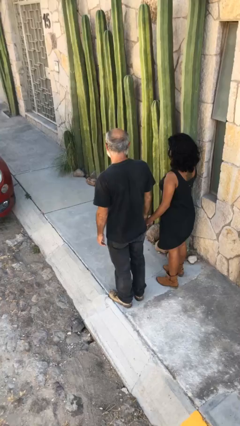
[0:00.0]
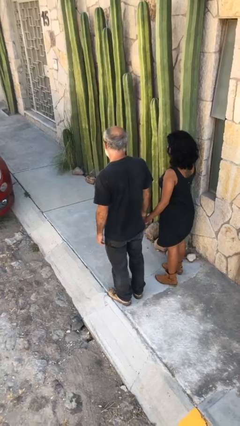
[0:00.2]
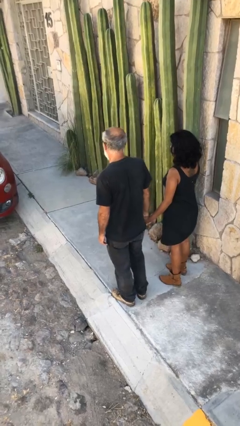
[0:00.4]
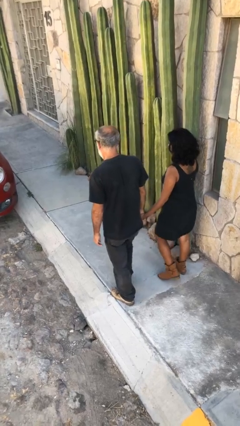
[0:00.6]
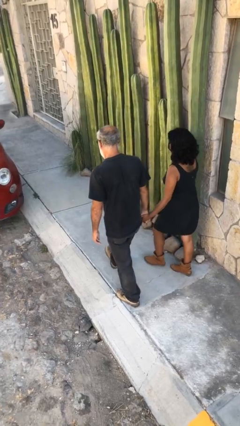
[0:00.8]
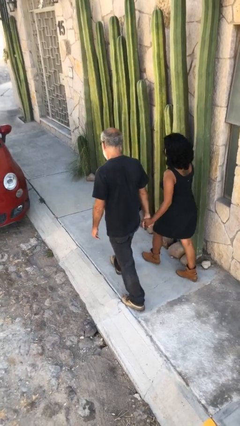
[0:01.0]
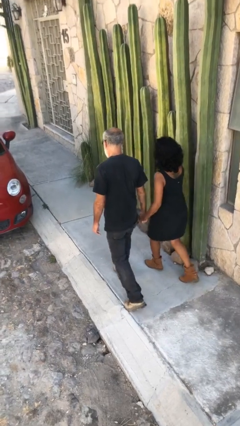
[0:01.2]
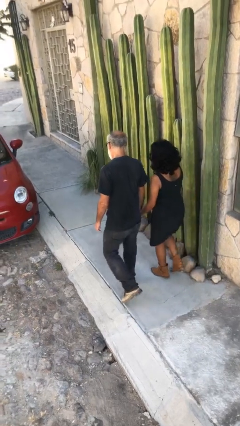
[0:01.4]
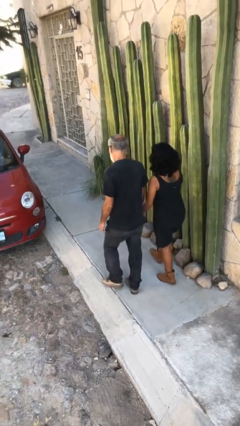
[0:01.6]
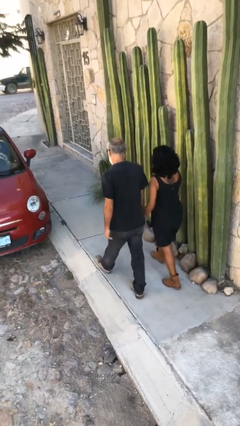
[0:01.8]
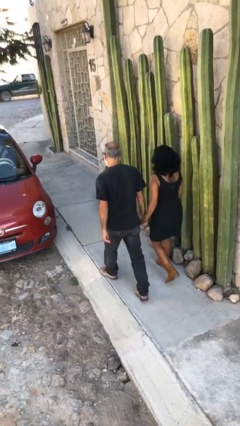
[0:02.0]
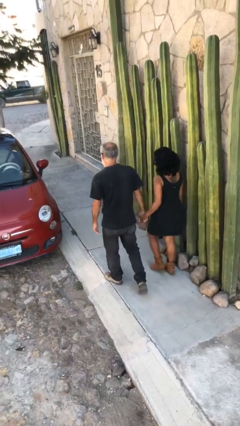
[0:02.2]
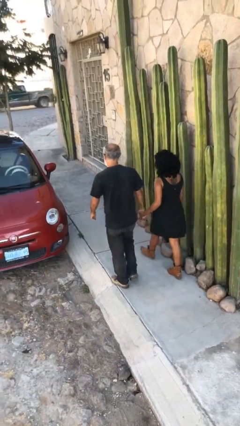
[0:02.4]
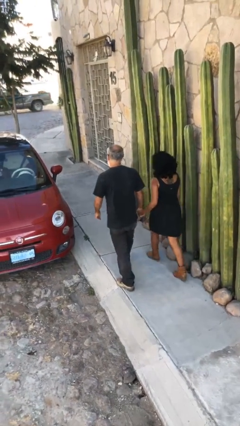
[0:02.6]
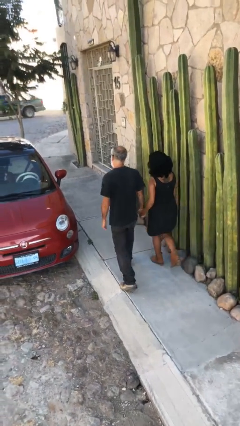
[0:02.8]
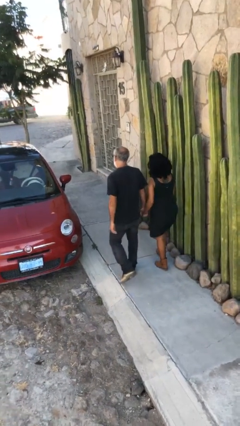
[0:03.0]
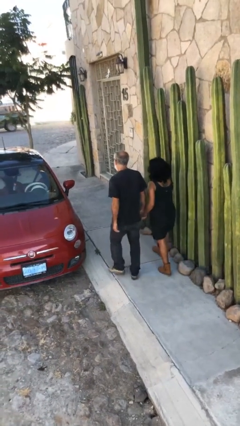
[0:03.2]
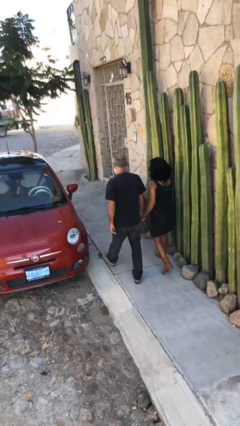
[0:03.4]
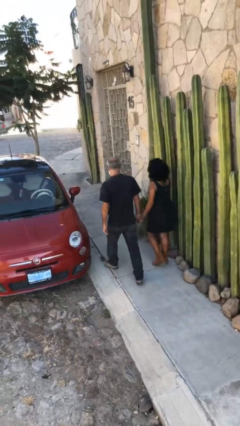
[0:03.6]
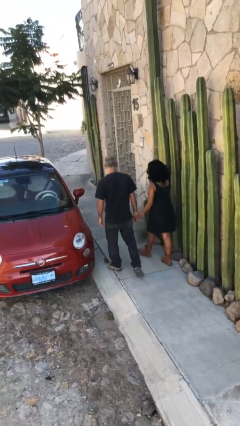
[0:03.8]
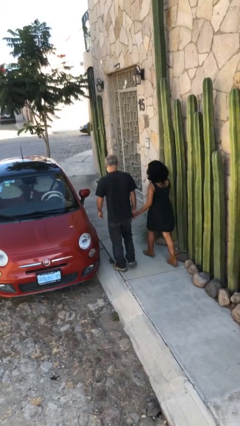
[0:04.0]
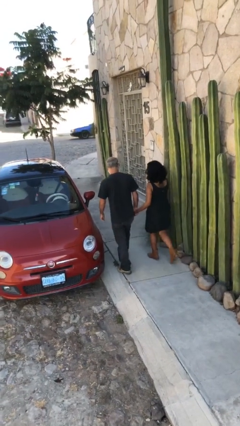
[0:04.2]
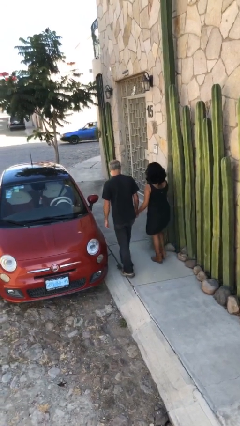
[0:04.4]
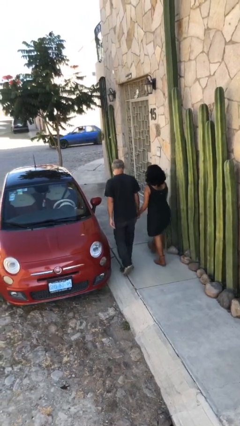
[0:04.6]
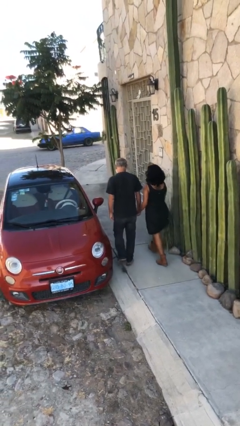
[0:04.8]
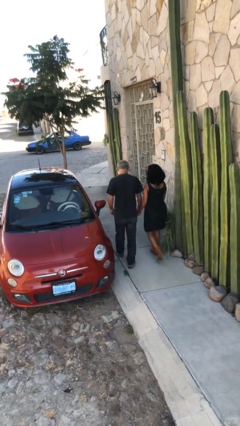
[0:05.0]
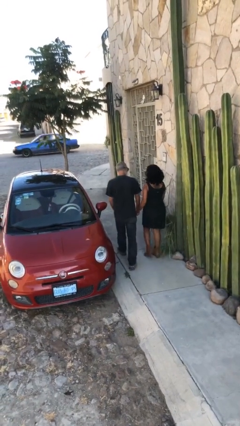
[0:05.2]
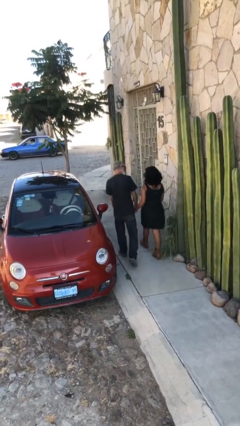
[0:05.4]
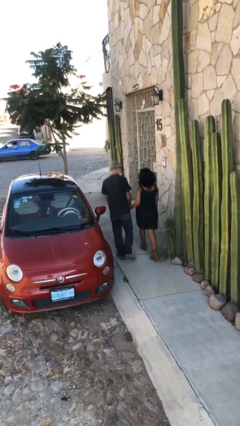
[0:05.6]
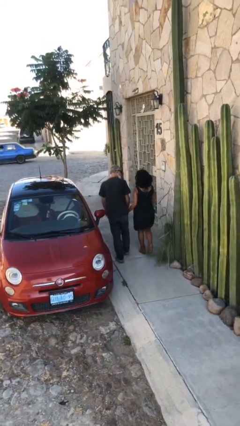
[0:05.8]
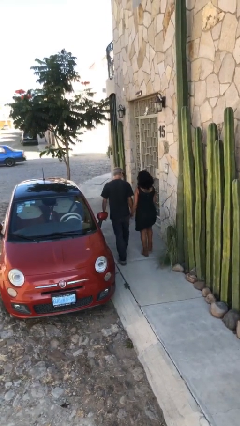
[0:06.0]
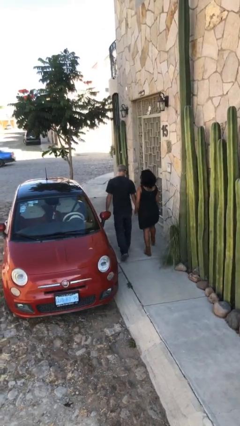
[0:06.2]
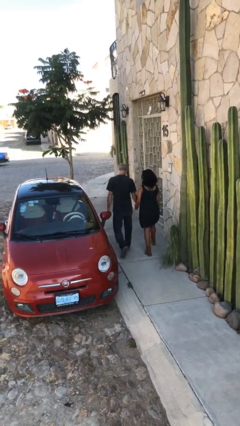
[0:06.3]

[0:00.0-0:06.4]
person holds hand

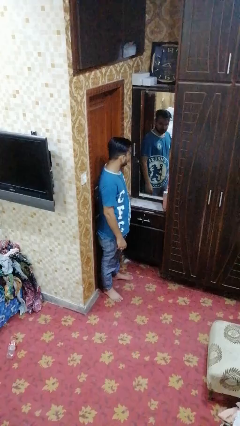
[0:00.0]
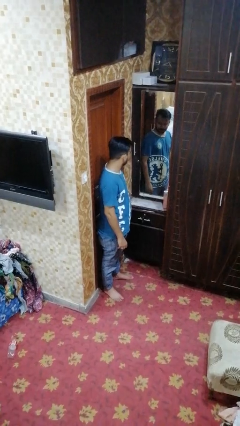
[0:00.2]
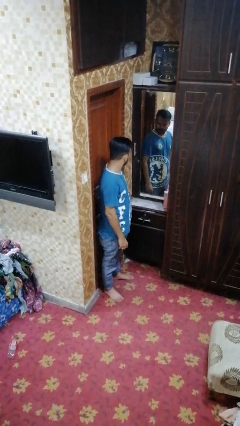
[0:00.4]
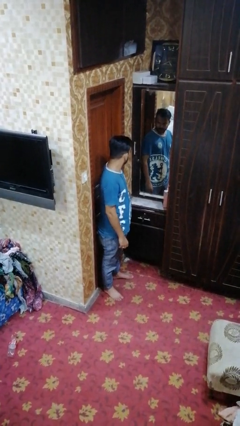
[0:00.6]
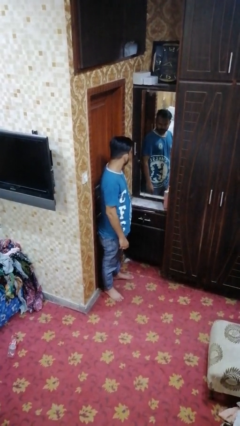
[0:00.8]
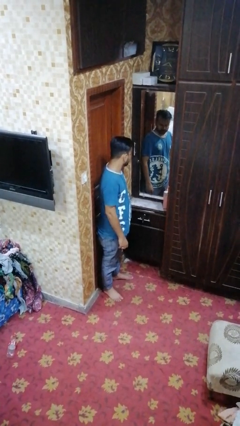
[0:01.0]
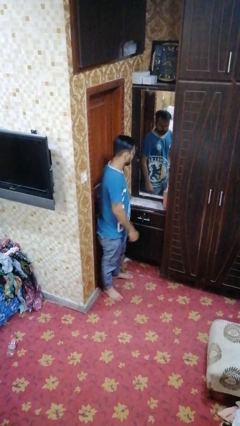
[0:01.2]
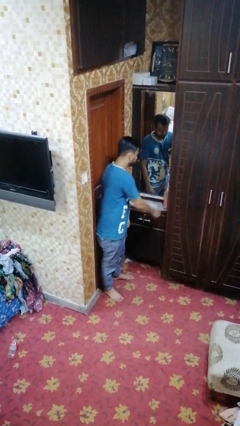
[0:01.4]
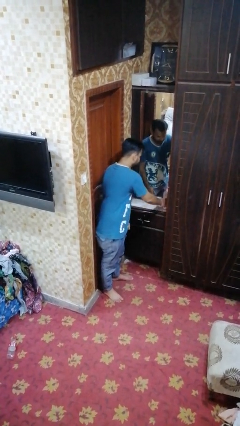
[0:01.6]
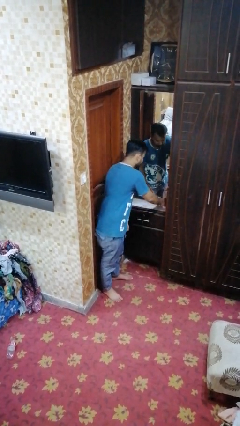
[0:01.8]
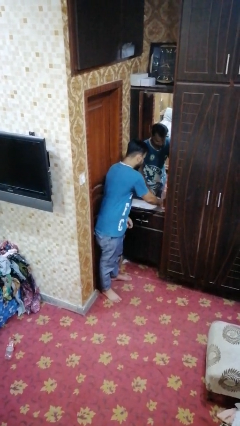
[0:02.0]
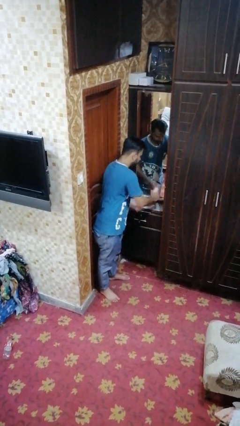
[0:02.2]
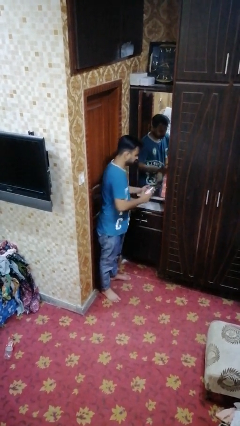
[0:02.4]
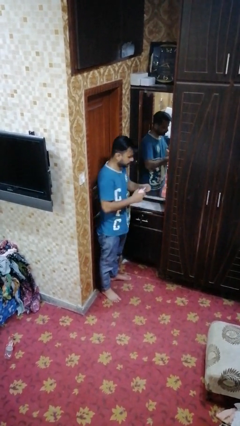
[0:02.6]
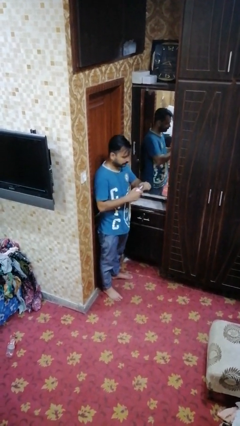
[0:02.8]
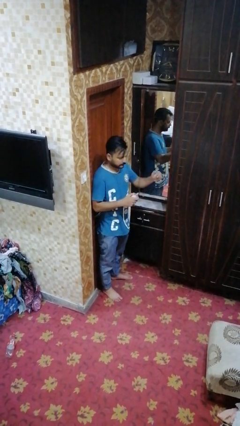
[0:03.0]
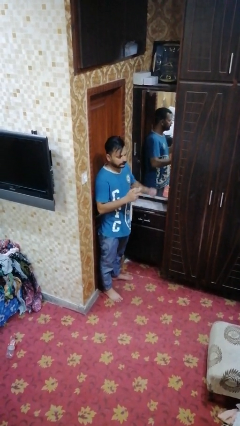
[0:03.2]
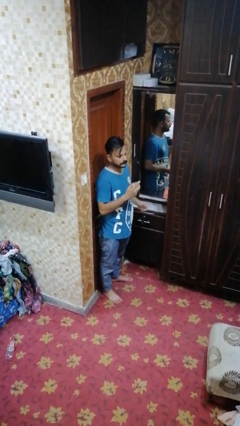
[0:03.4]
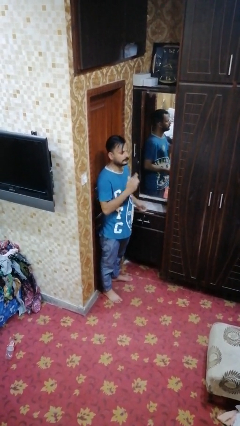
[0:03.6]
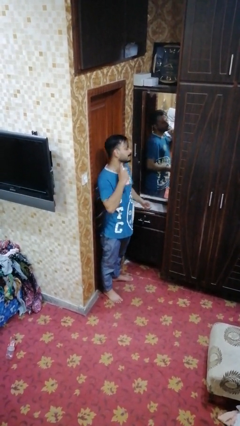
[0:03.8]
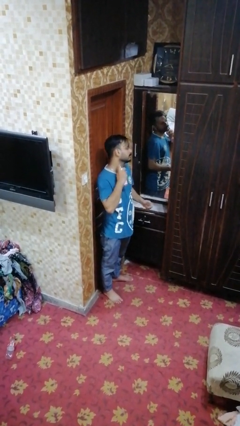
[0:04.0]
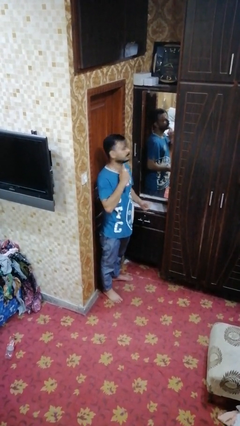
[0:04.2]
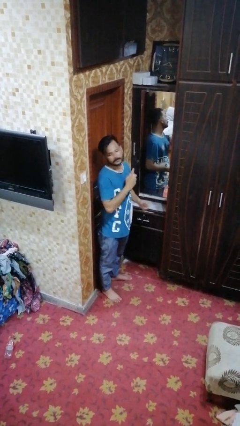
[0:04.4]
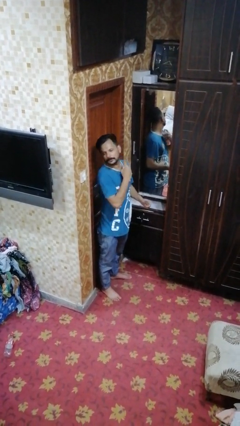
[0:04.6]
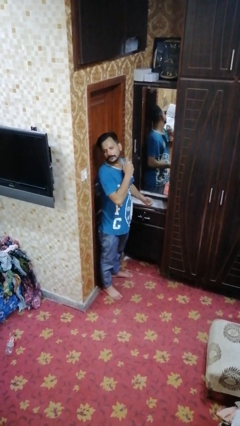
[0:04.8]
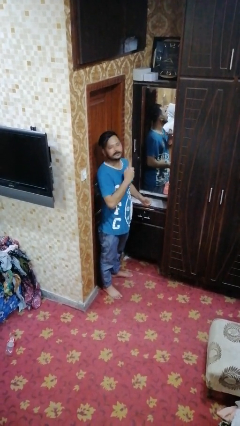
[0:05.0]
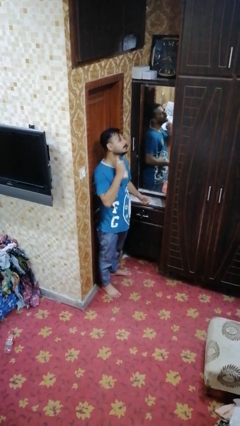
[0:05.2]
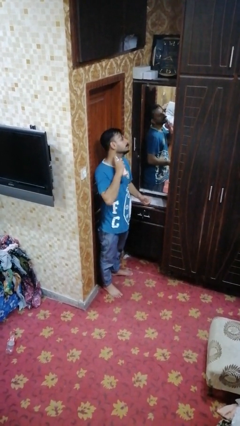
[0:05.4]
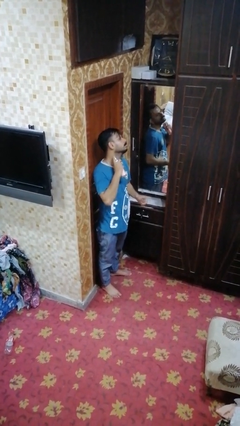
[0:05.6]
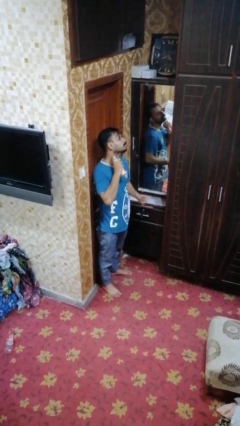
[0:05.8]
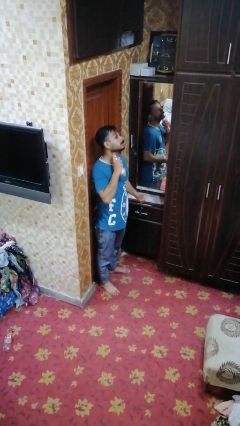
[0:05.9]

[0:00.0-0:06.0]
person sprays from bottle

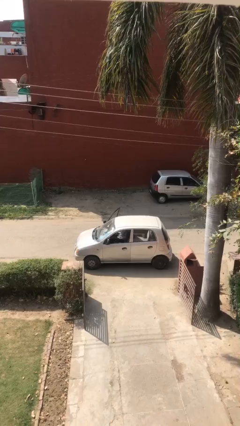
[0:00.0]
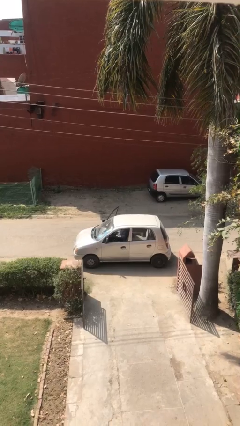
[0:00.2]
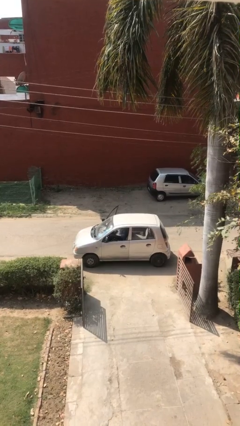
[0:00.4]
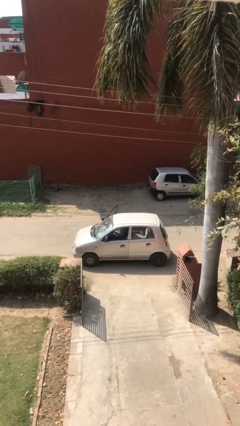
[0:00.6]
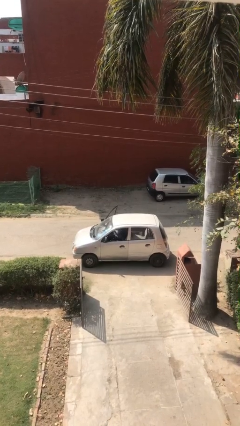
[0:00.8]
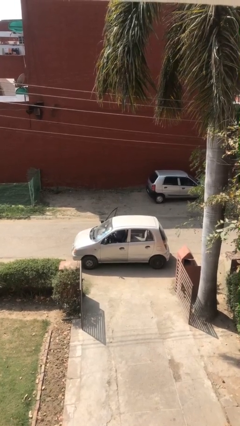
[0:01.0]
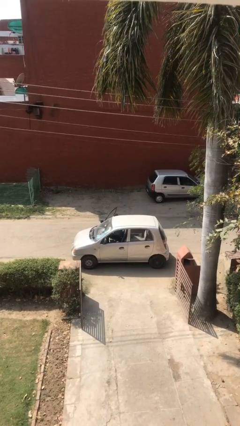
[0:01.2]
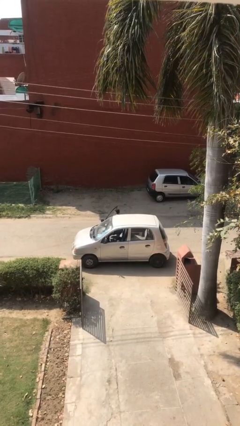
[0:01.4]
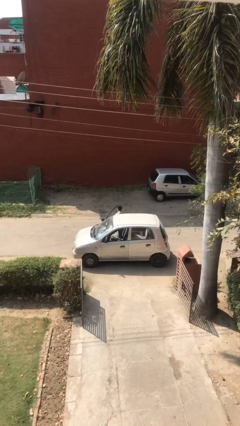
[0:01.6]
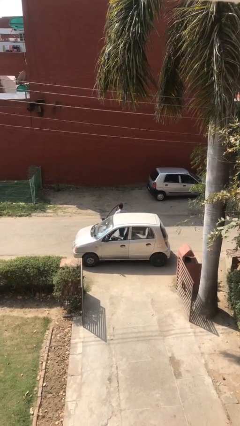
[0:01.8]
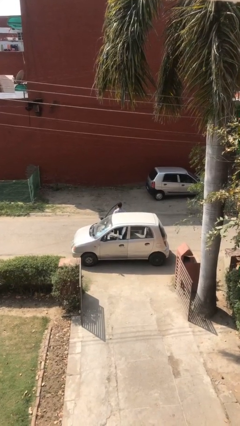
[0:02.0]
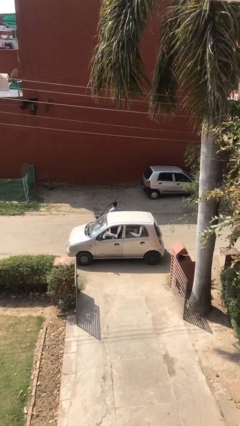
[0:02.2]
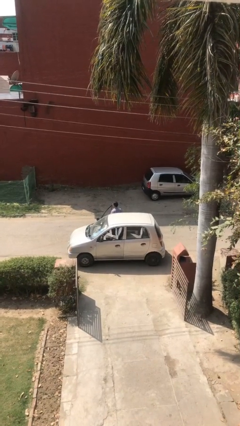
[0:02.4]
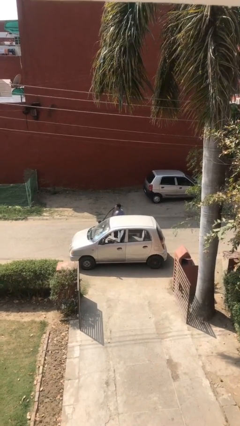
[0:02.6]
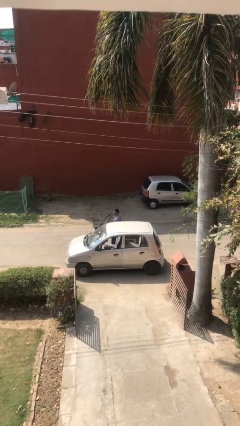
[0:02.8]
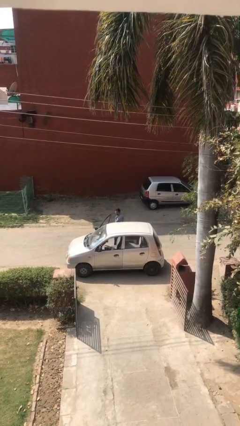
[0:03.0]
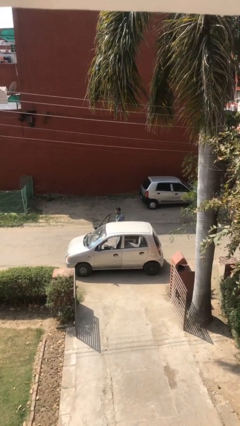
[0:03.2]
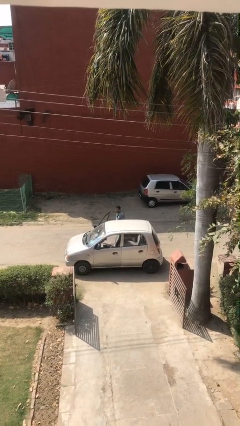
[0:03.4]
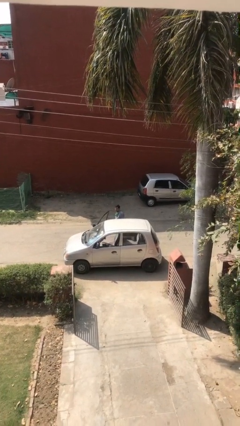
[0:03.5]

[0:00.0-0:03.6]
person exits car

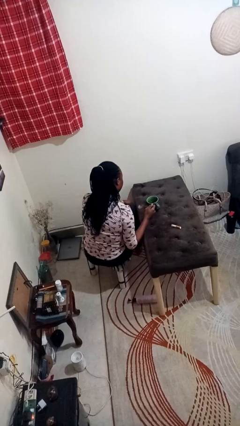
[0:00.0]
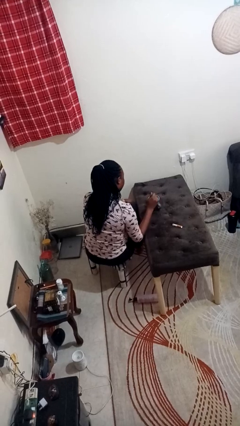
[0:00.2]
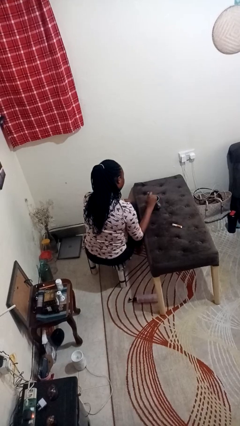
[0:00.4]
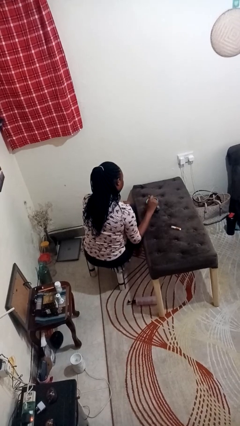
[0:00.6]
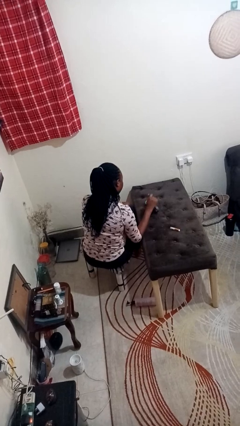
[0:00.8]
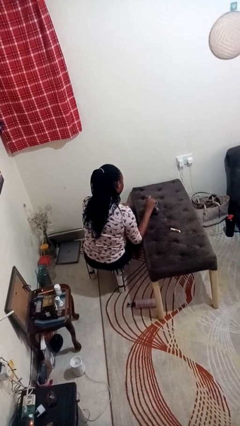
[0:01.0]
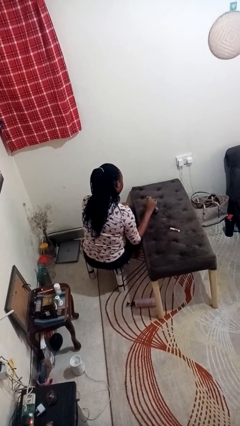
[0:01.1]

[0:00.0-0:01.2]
person stirs mug
